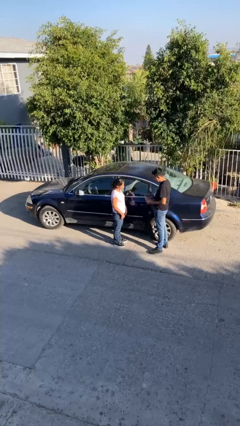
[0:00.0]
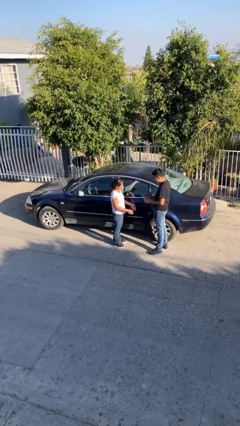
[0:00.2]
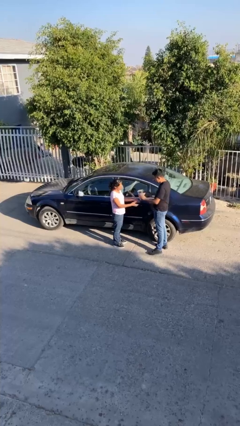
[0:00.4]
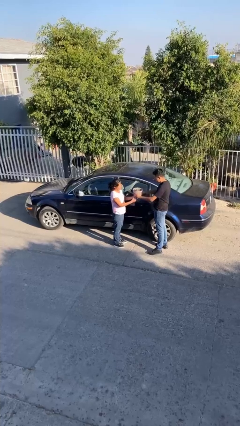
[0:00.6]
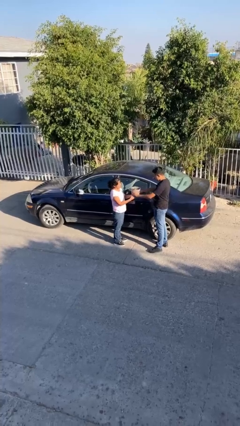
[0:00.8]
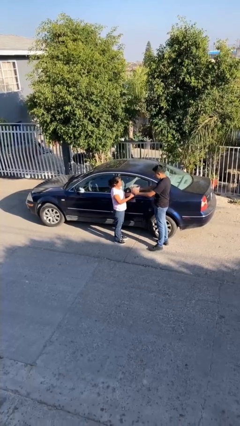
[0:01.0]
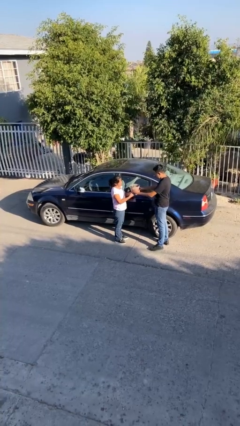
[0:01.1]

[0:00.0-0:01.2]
person transfers object to person

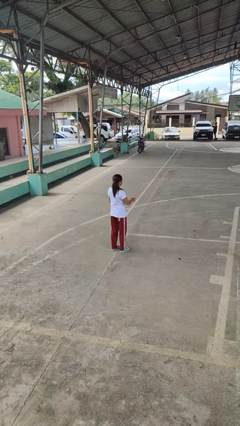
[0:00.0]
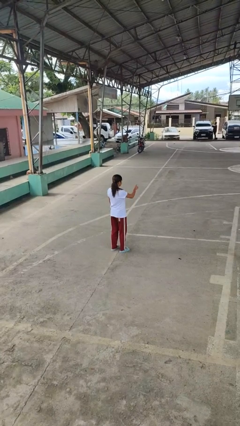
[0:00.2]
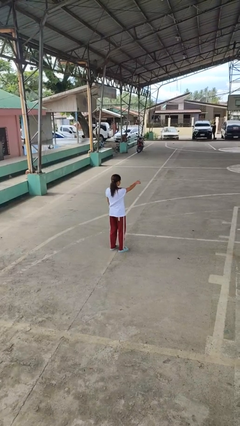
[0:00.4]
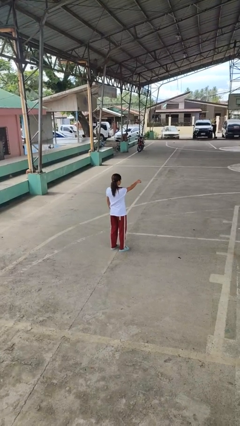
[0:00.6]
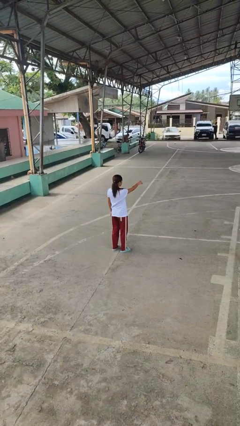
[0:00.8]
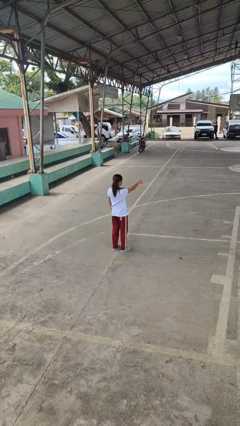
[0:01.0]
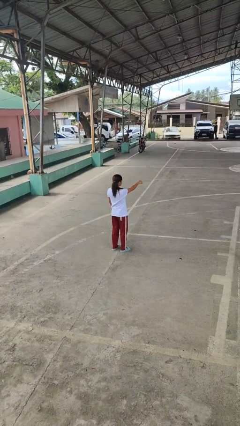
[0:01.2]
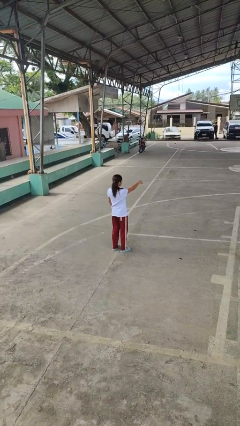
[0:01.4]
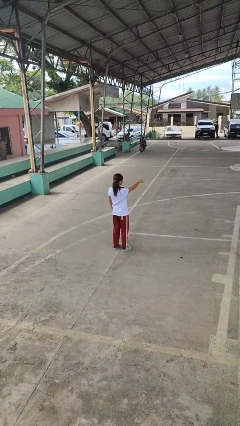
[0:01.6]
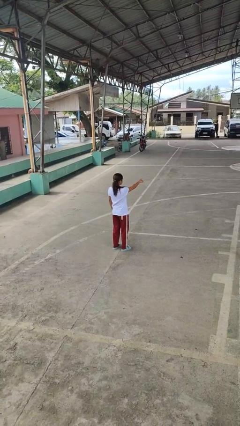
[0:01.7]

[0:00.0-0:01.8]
person points at person

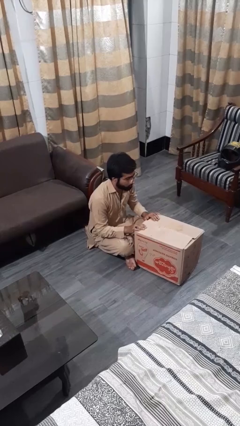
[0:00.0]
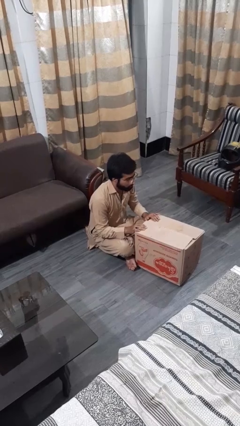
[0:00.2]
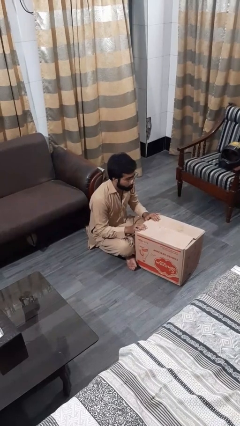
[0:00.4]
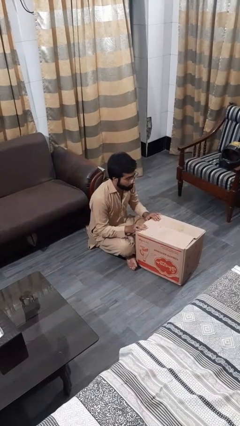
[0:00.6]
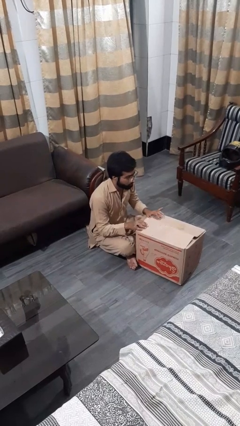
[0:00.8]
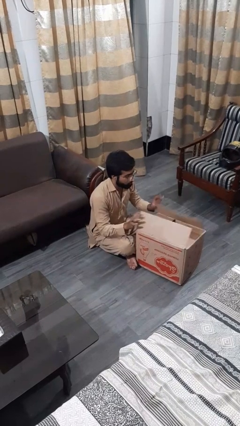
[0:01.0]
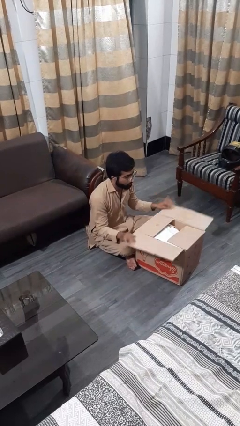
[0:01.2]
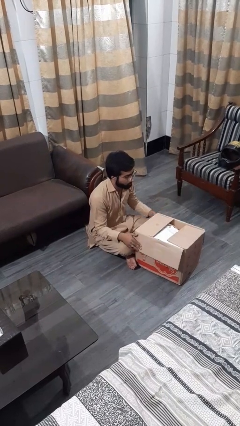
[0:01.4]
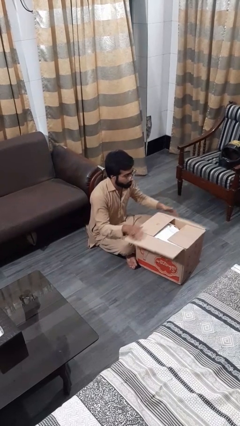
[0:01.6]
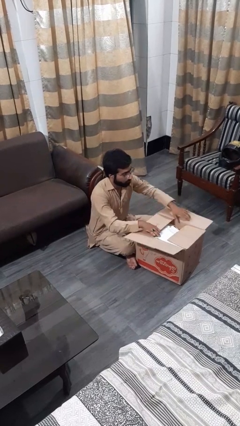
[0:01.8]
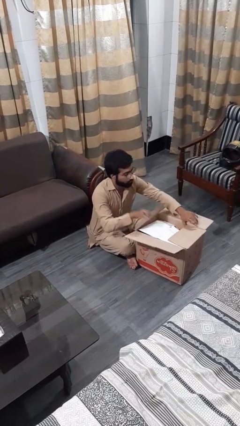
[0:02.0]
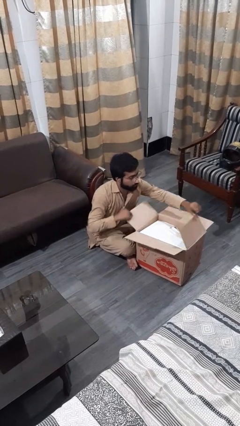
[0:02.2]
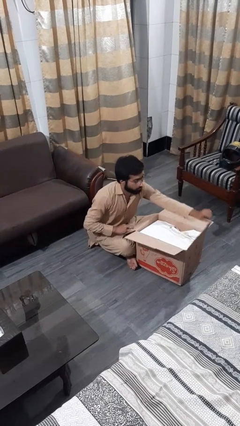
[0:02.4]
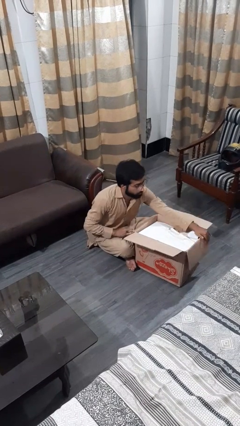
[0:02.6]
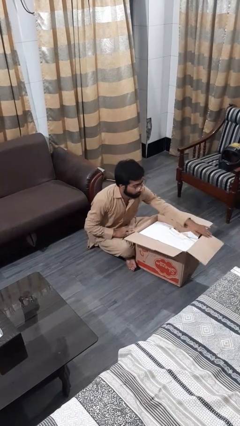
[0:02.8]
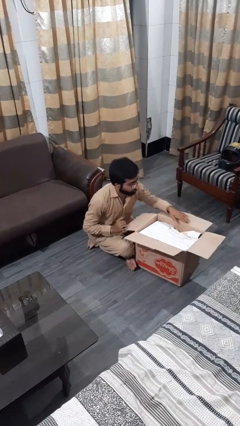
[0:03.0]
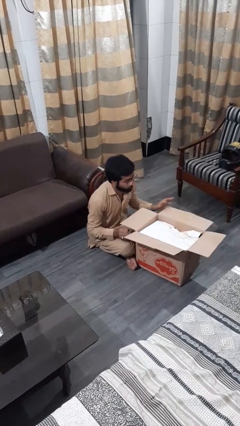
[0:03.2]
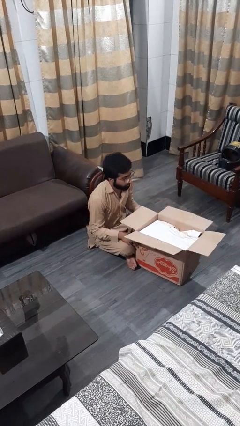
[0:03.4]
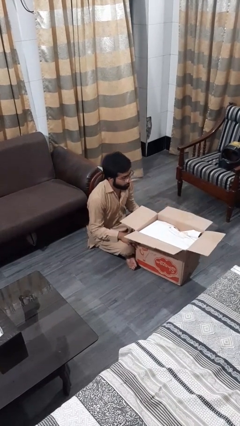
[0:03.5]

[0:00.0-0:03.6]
person opens box

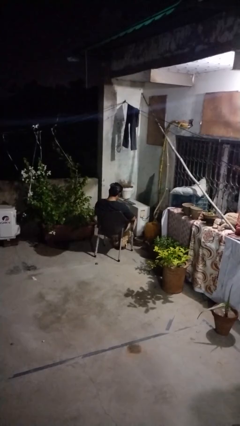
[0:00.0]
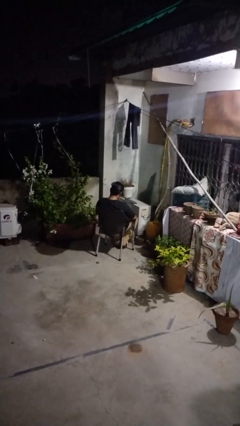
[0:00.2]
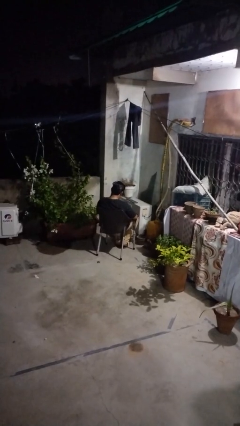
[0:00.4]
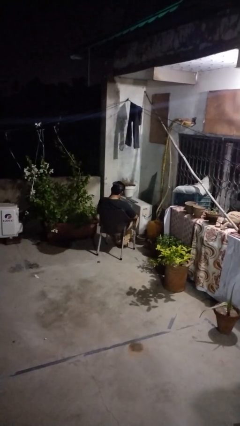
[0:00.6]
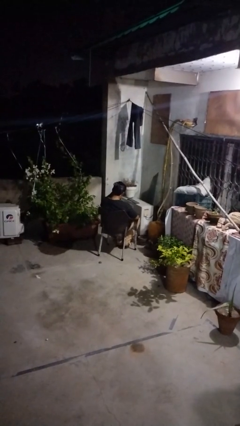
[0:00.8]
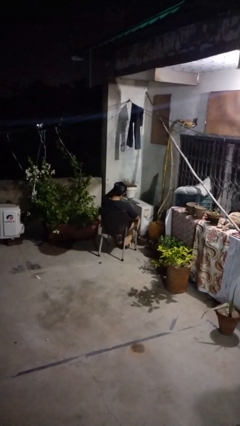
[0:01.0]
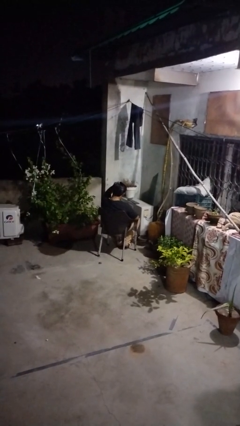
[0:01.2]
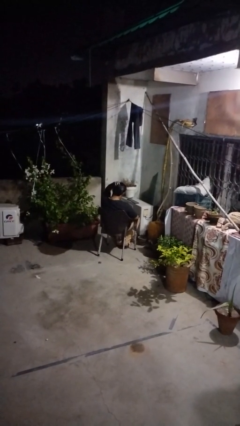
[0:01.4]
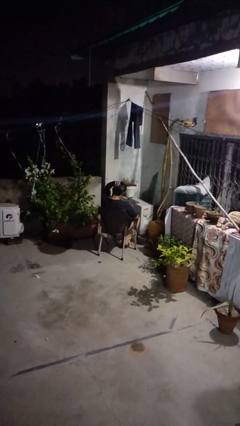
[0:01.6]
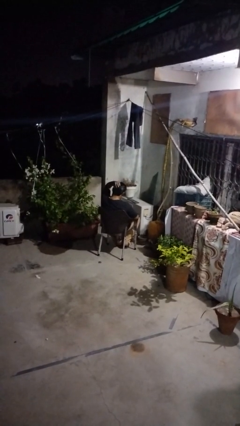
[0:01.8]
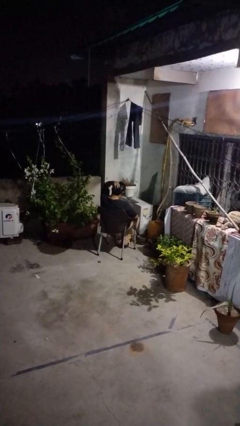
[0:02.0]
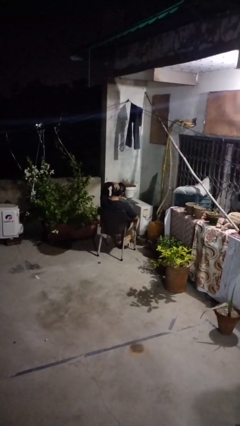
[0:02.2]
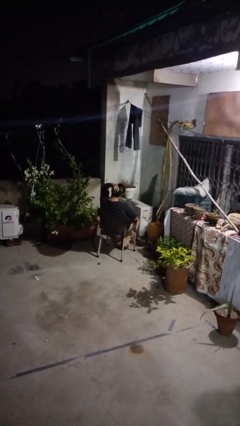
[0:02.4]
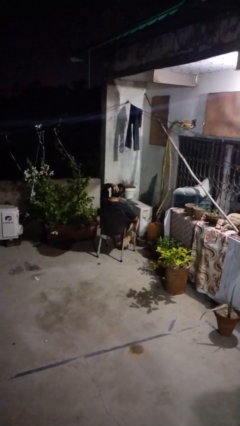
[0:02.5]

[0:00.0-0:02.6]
person strokes hair

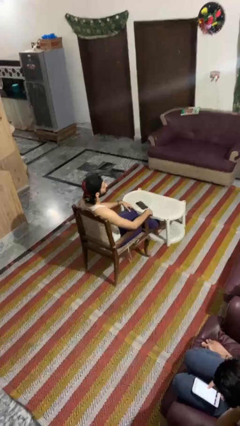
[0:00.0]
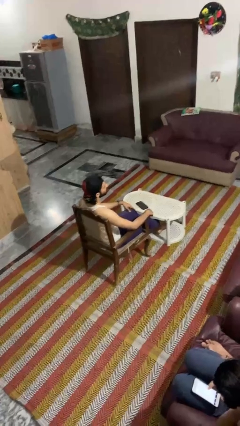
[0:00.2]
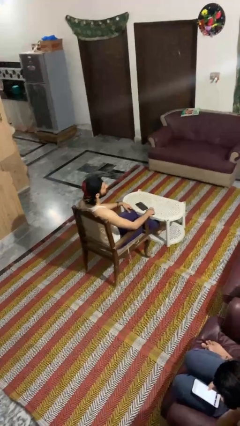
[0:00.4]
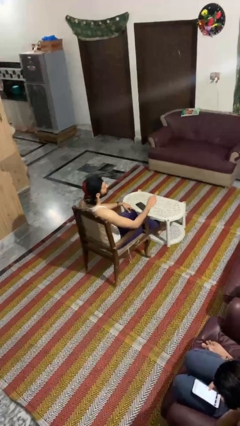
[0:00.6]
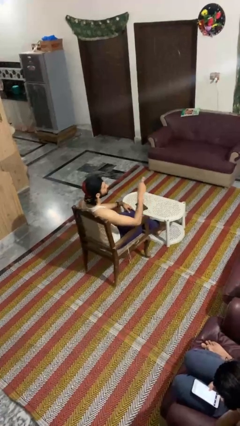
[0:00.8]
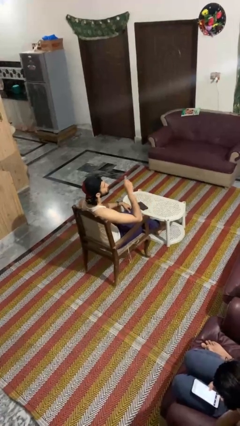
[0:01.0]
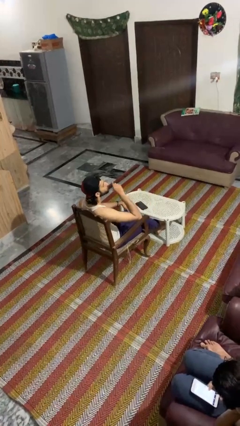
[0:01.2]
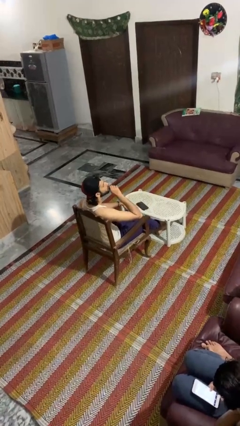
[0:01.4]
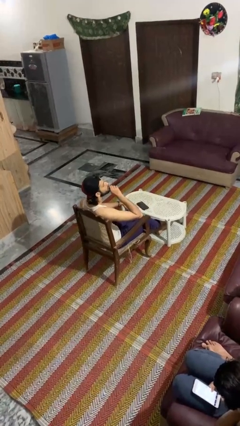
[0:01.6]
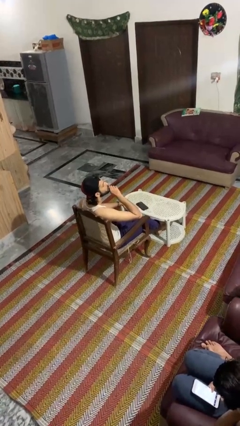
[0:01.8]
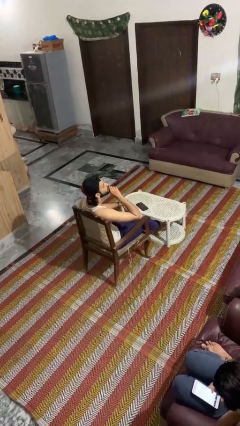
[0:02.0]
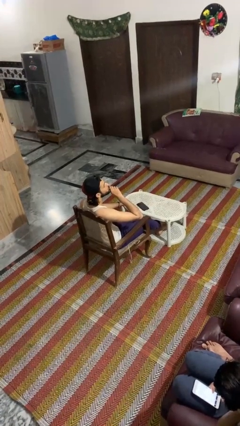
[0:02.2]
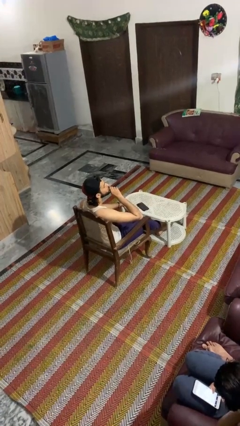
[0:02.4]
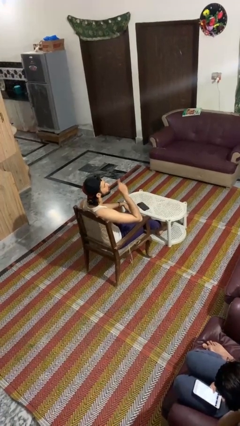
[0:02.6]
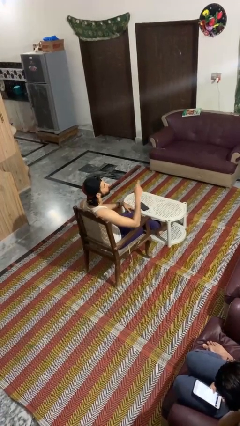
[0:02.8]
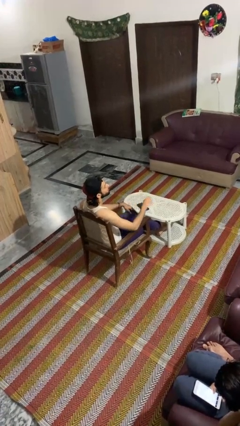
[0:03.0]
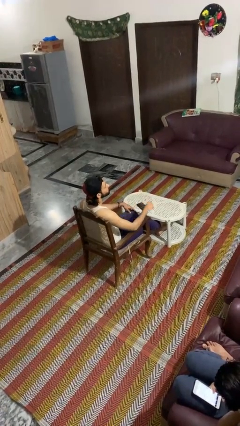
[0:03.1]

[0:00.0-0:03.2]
person gestures be quiet

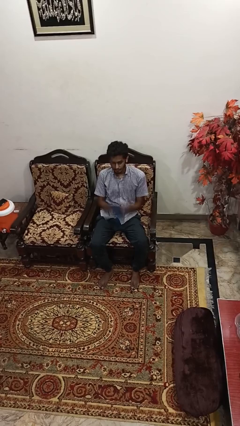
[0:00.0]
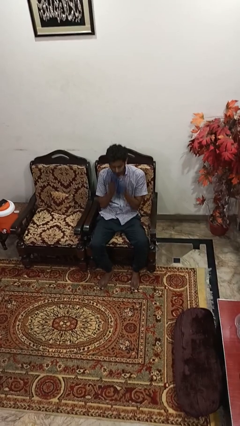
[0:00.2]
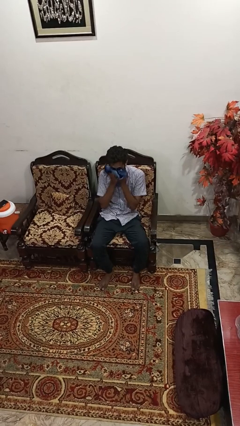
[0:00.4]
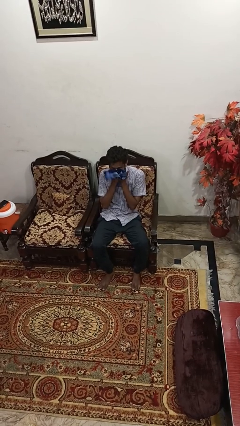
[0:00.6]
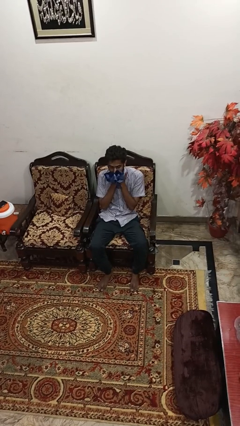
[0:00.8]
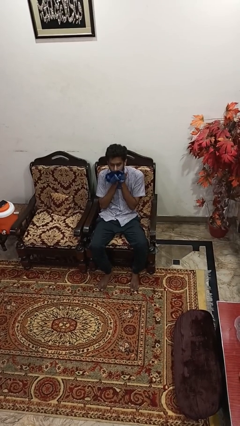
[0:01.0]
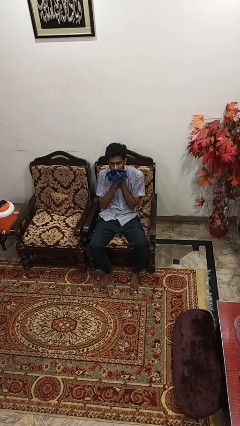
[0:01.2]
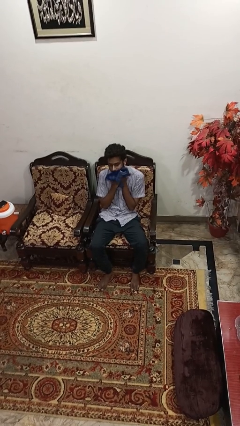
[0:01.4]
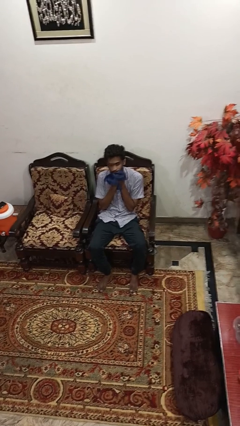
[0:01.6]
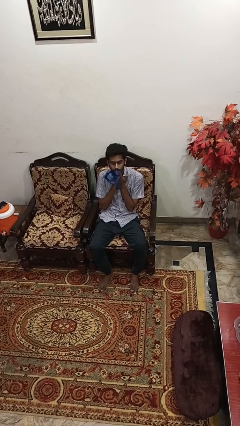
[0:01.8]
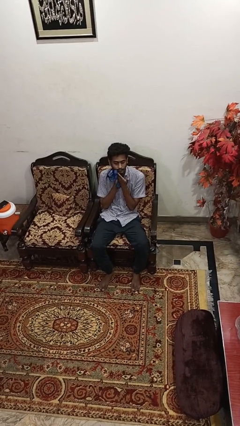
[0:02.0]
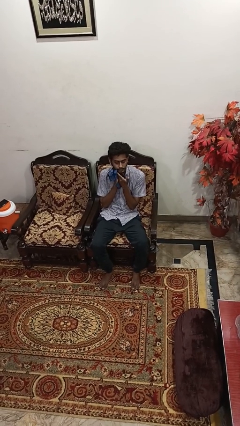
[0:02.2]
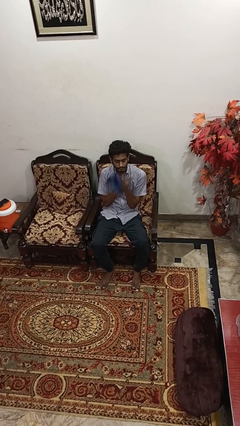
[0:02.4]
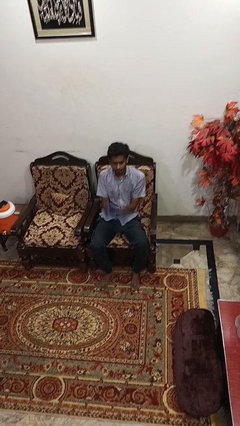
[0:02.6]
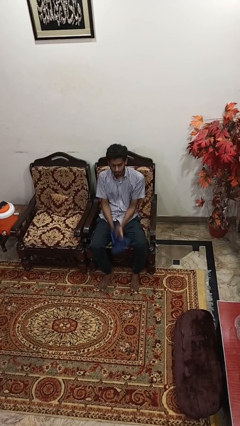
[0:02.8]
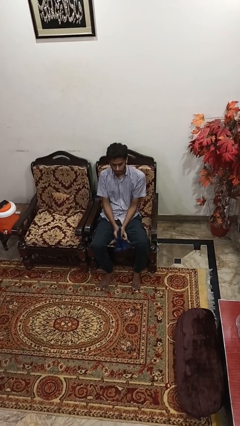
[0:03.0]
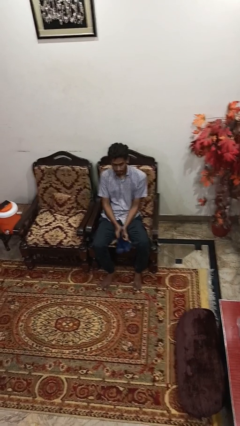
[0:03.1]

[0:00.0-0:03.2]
person wipes mouth with napkin

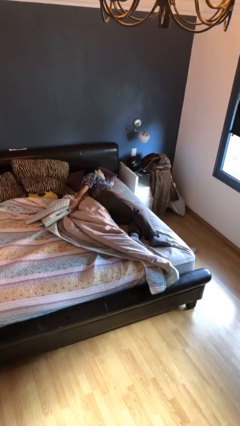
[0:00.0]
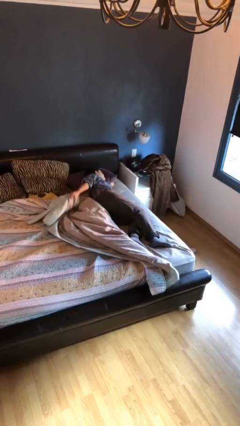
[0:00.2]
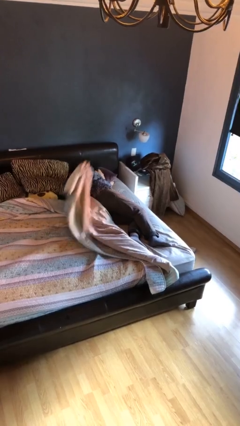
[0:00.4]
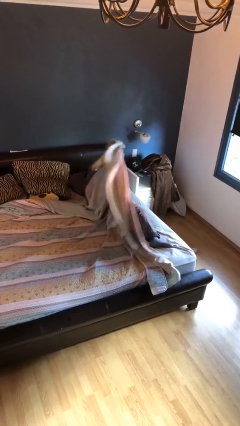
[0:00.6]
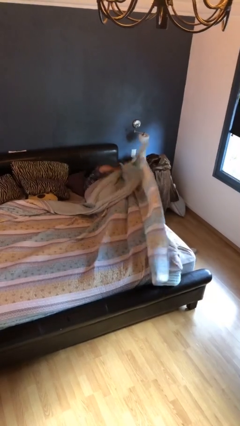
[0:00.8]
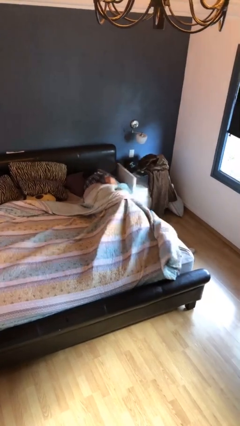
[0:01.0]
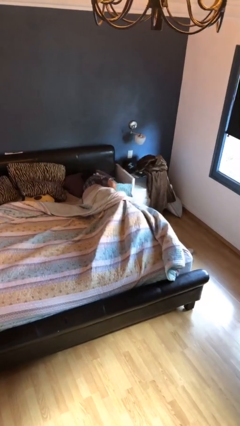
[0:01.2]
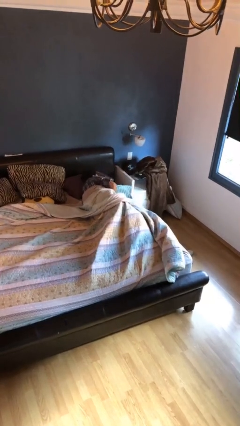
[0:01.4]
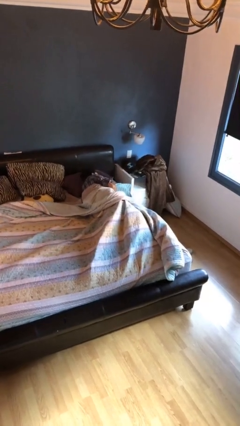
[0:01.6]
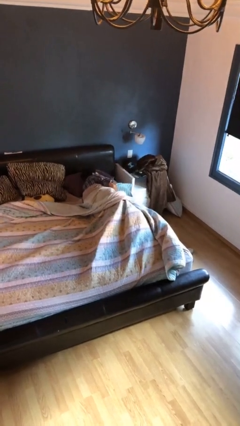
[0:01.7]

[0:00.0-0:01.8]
person covers with bedsheets
